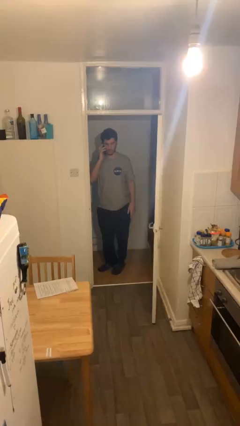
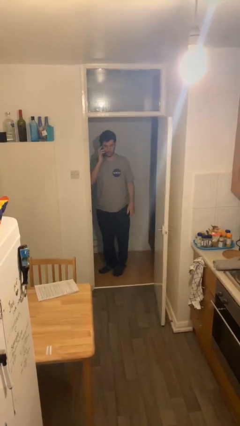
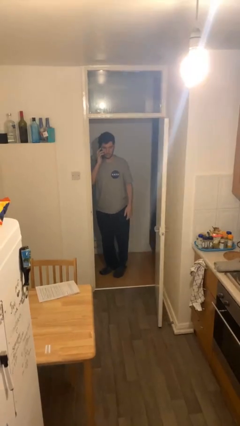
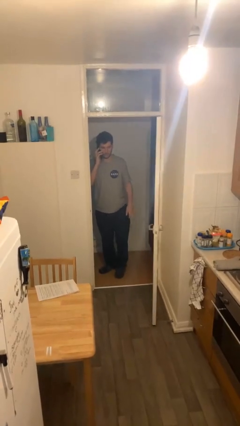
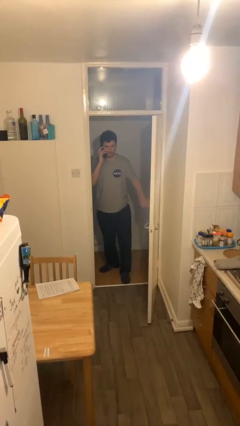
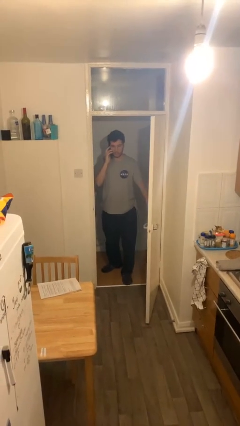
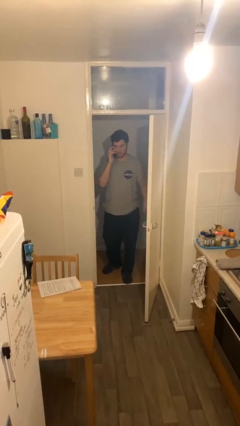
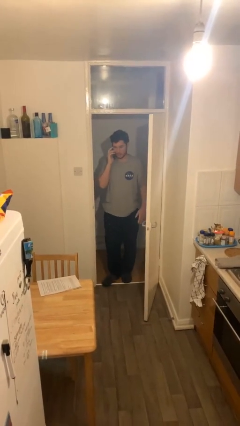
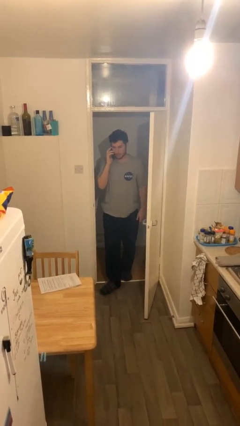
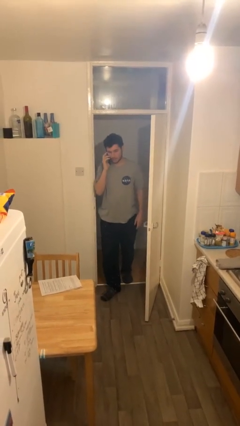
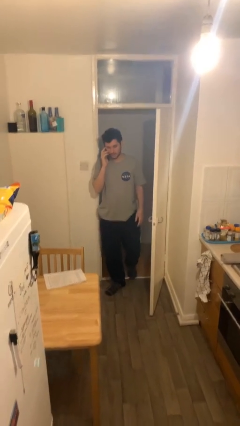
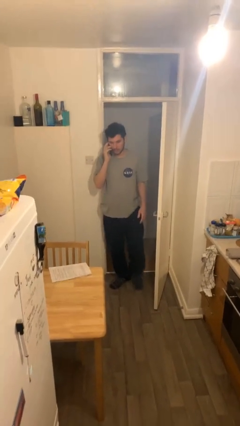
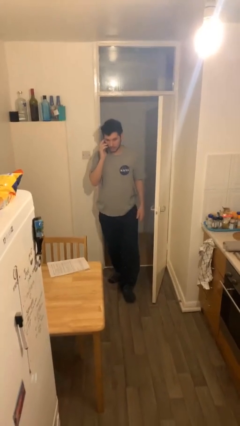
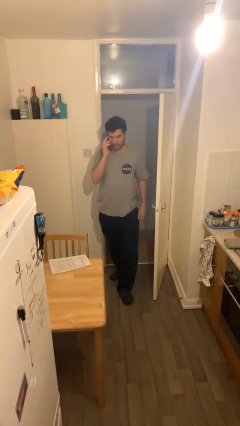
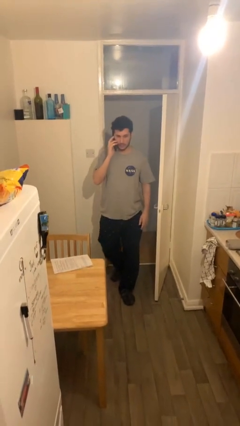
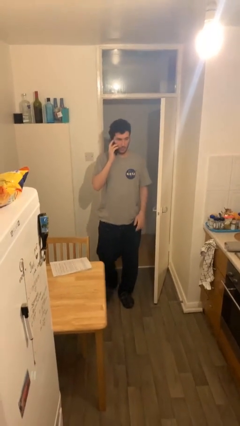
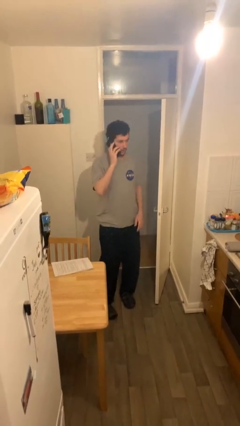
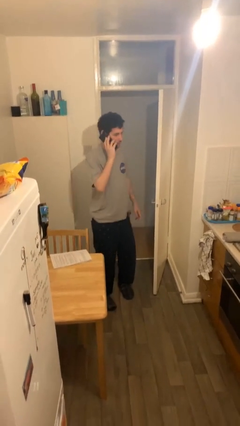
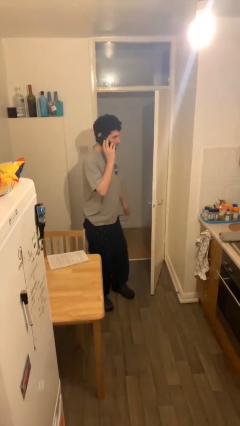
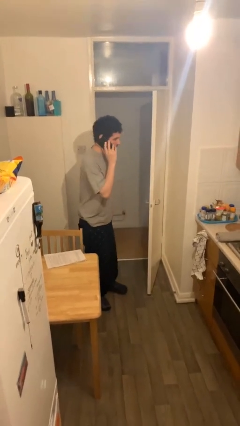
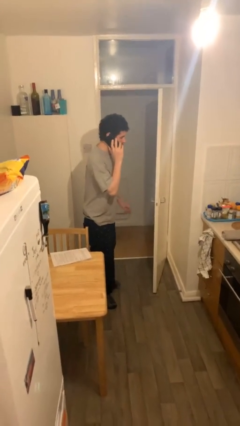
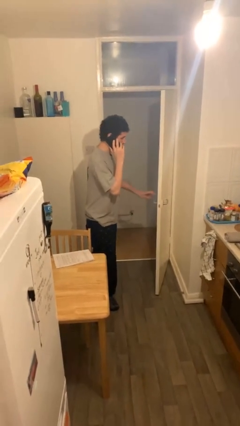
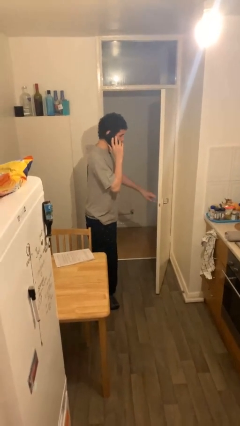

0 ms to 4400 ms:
person enters scene through structure

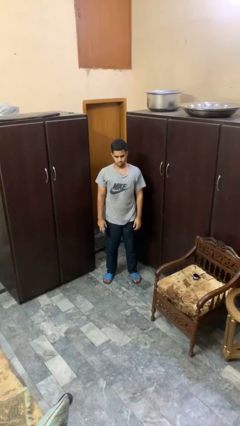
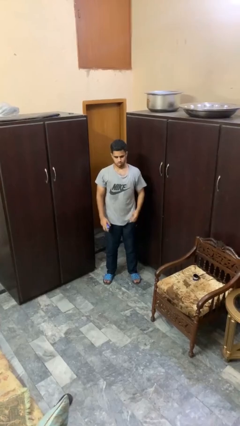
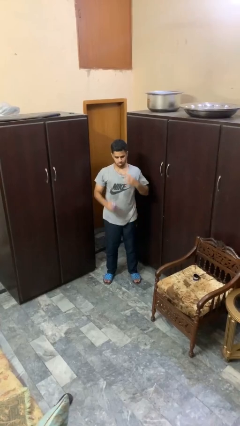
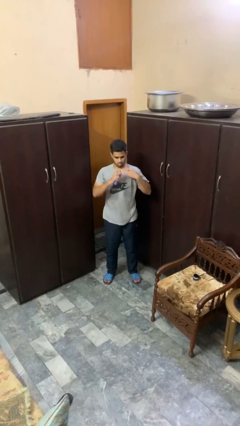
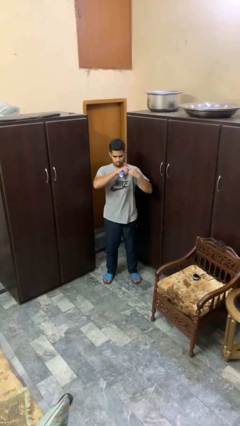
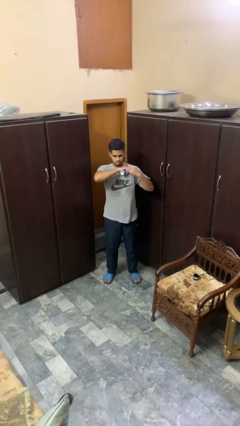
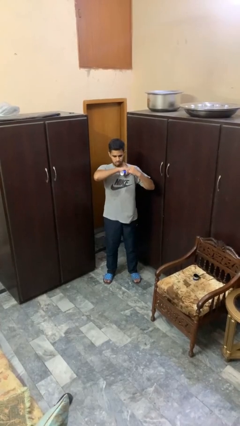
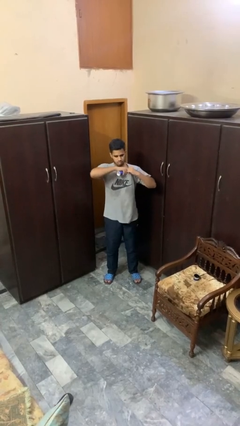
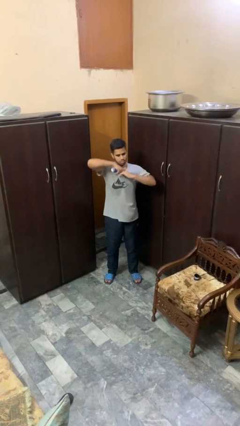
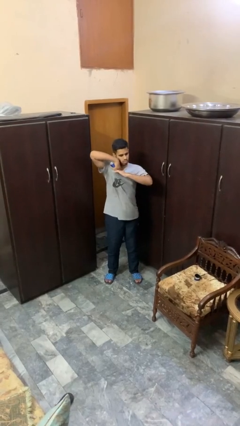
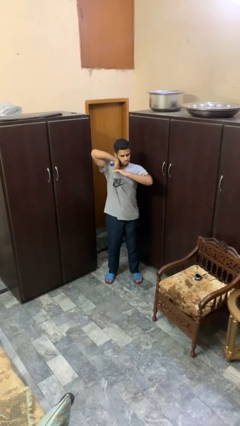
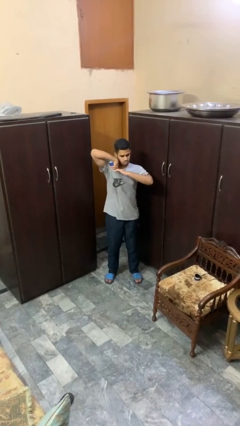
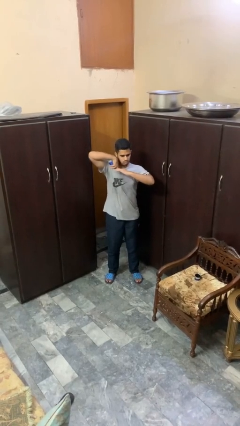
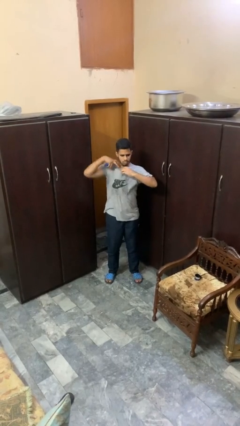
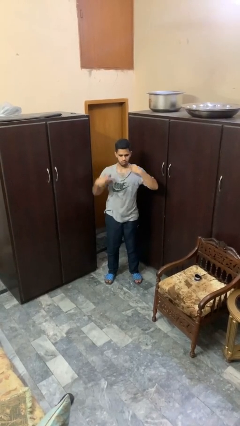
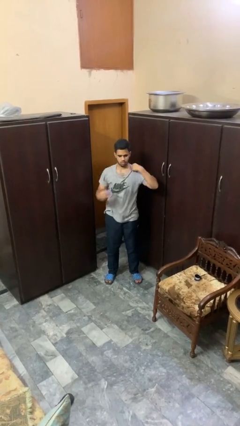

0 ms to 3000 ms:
person applies deodorant

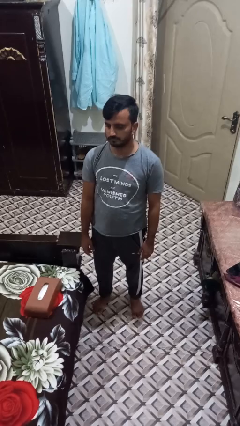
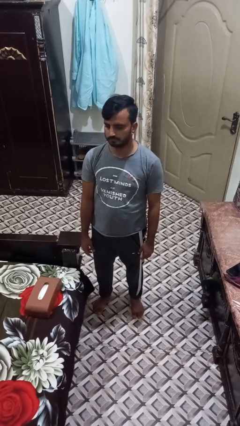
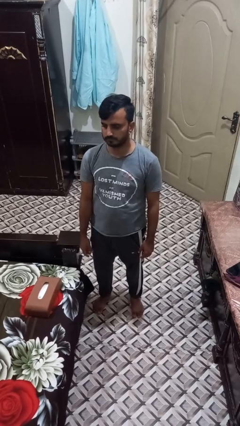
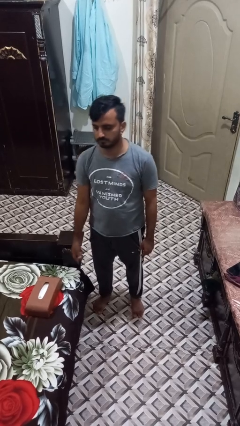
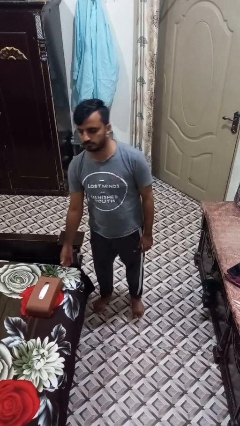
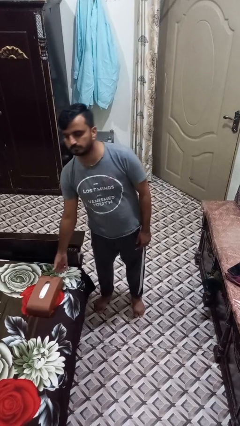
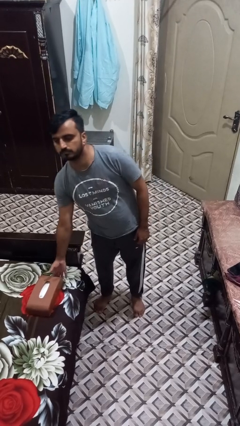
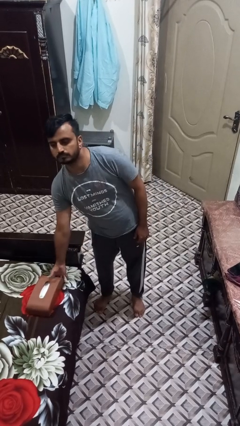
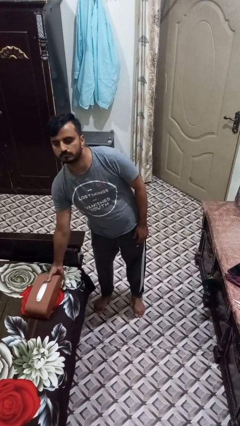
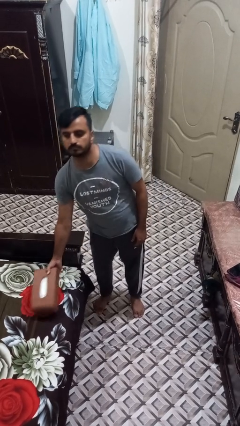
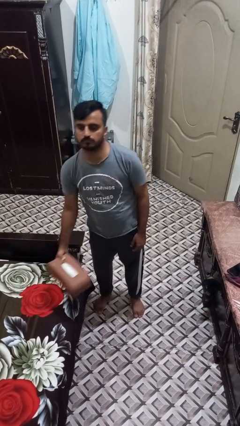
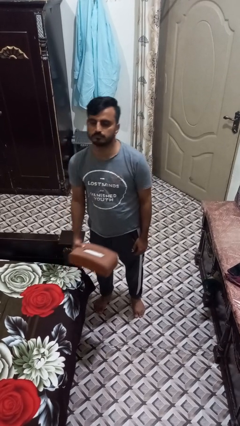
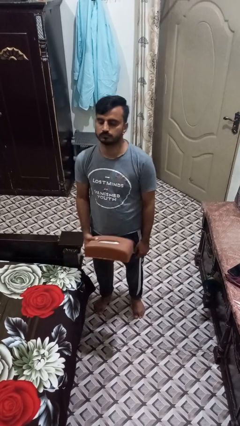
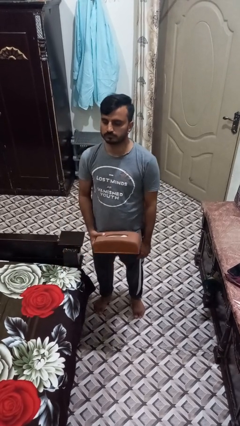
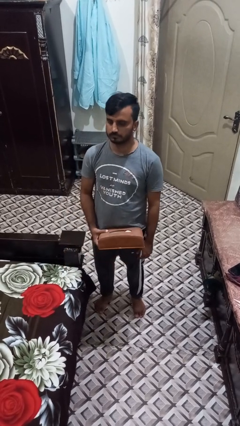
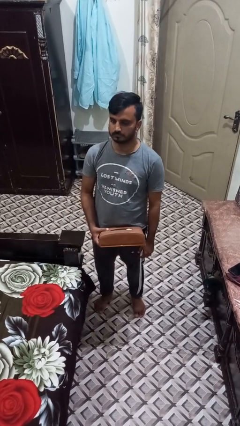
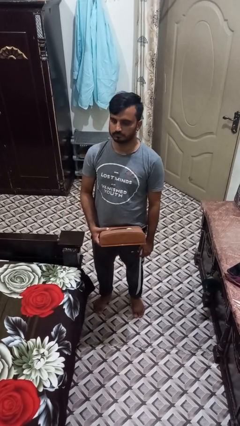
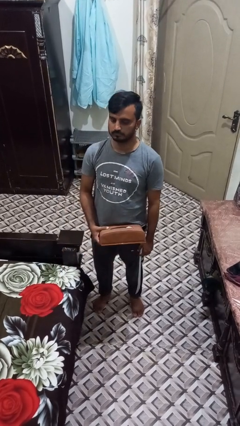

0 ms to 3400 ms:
person picks up object from bed

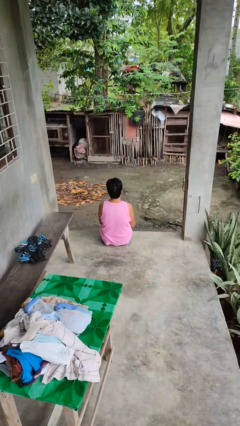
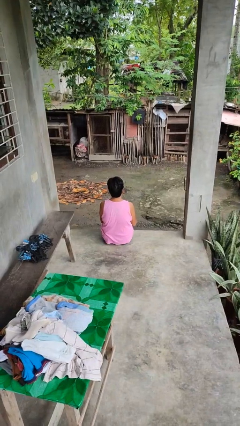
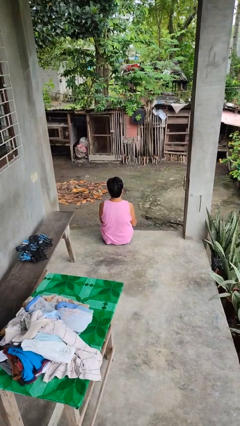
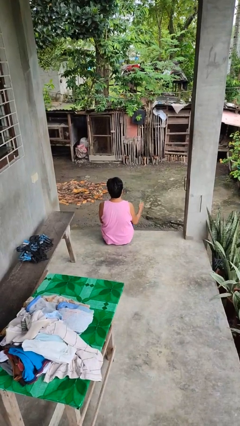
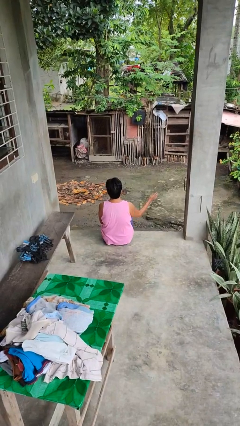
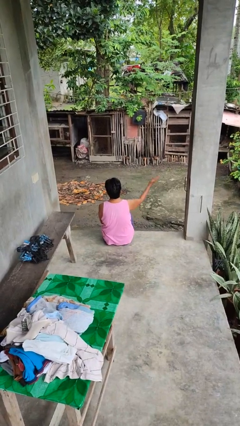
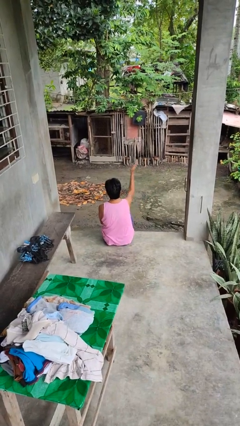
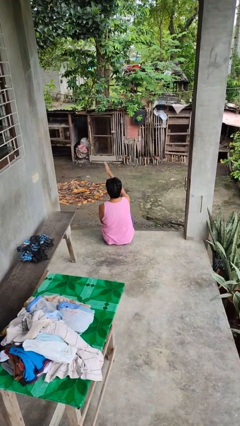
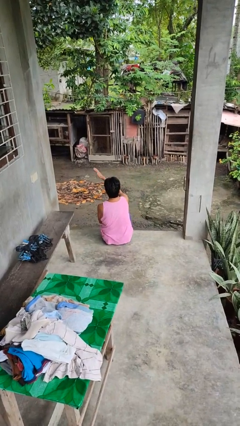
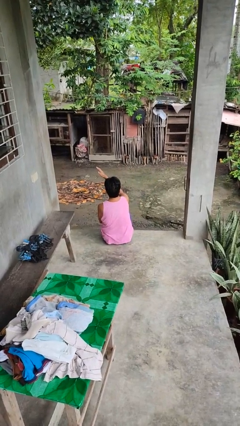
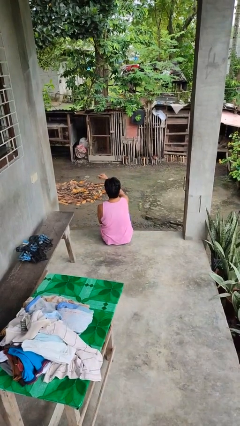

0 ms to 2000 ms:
person gestures swipe left

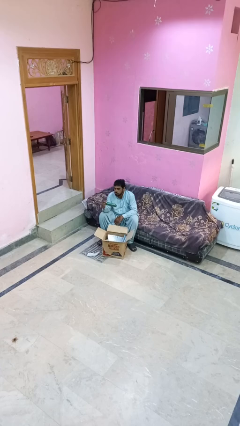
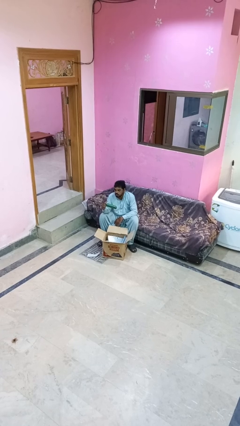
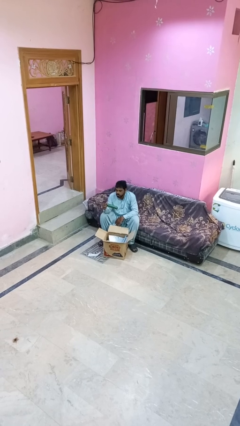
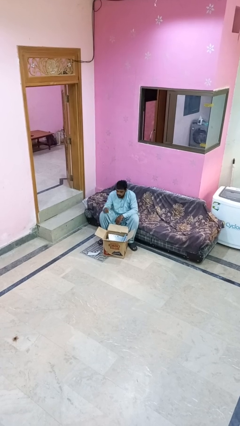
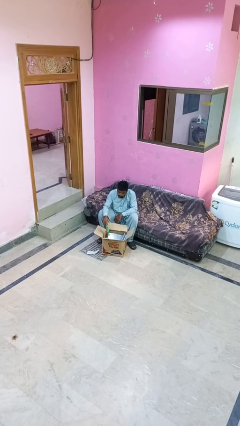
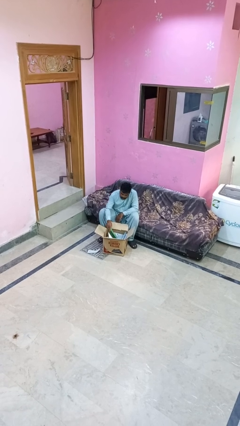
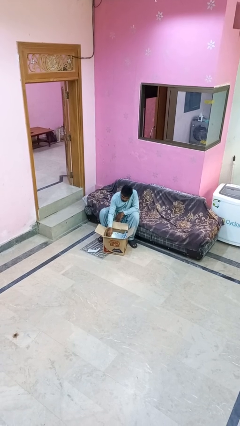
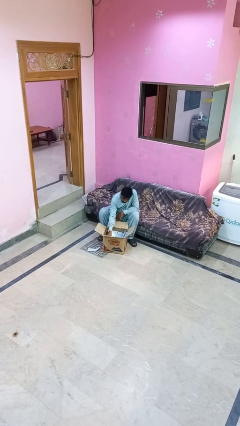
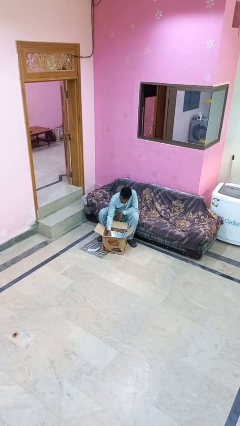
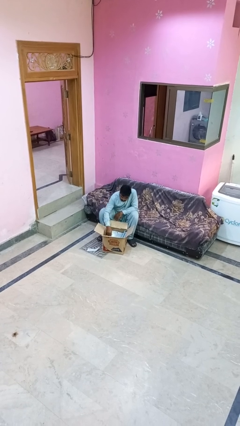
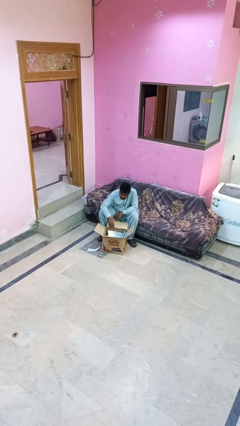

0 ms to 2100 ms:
person puts object into box

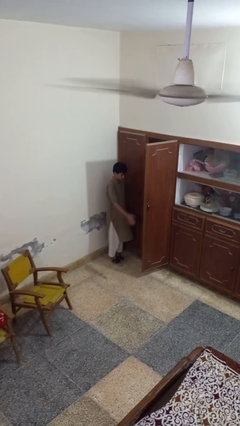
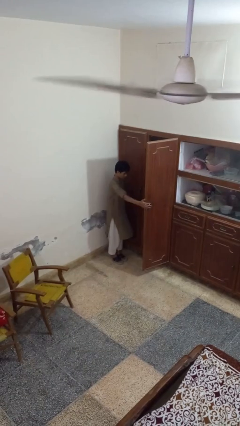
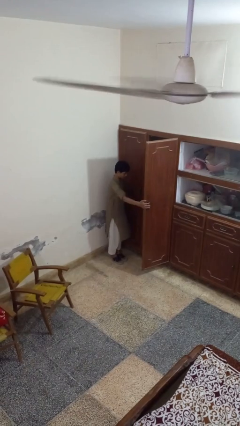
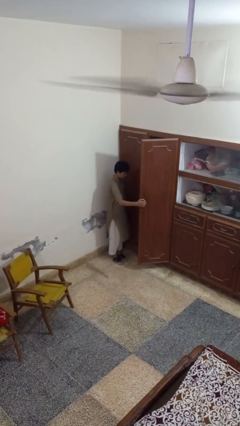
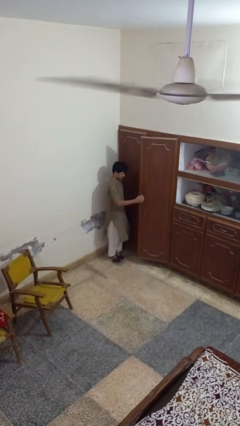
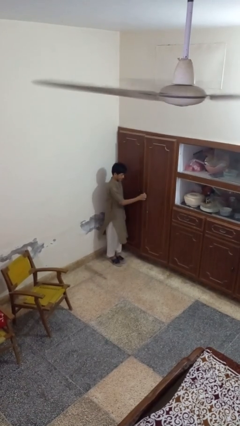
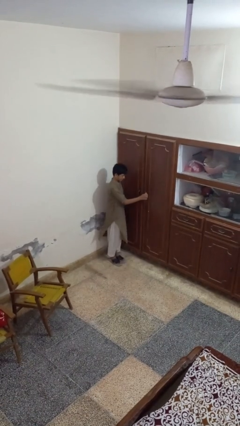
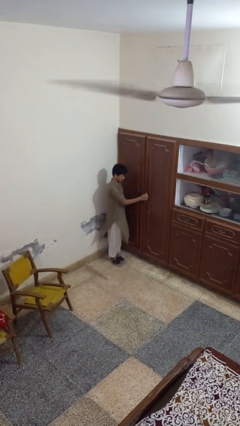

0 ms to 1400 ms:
person closes closet door

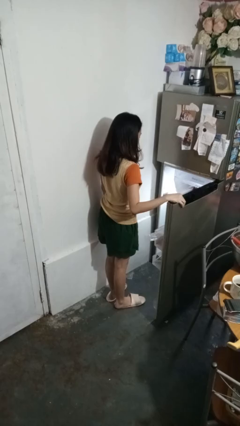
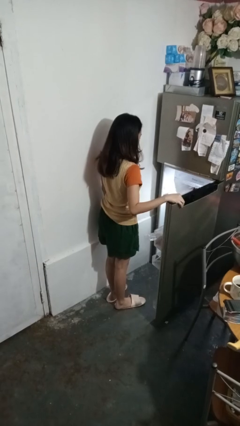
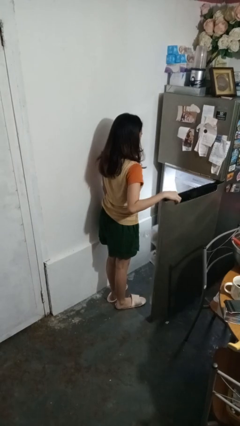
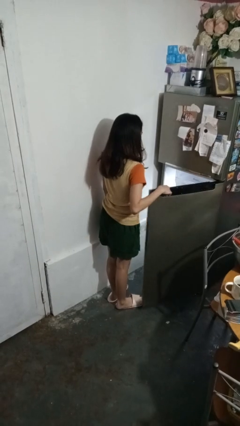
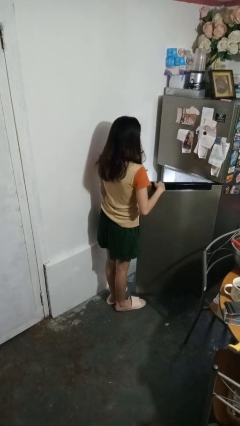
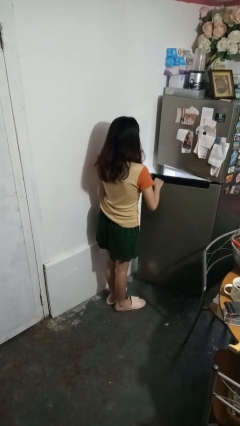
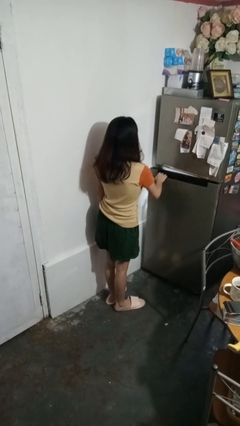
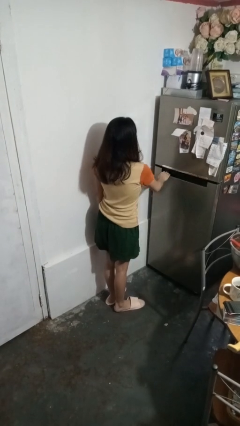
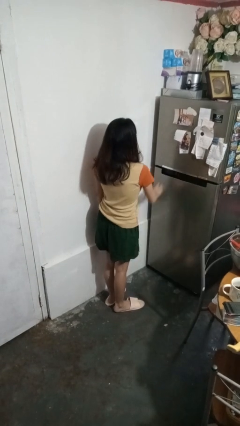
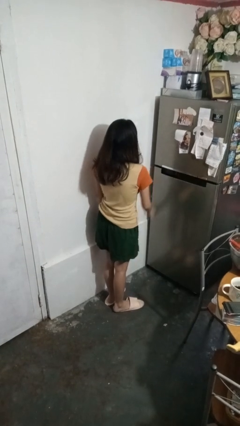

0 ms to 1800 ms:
person closes refrigerator
